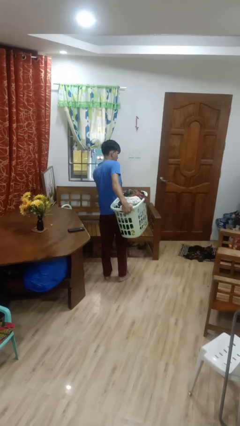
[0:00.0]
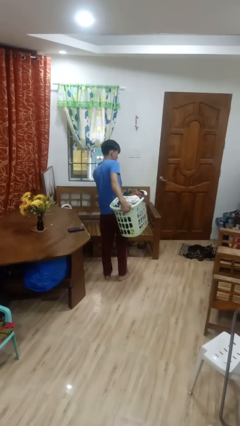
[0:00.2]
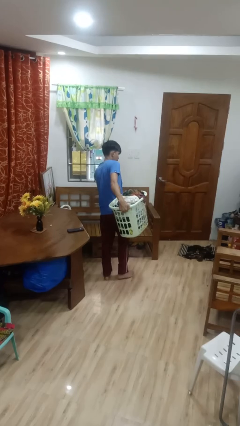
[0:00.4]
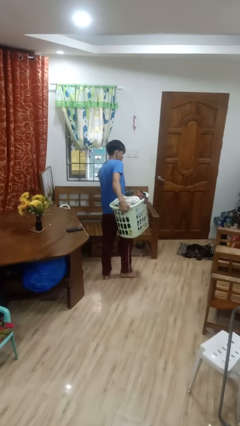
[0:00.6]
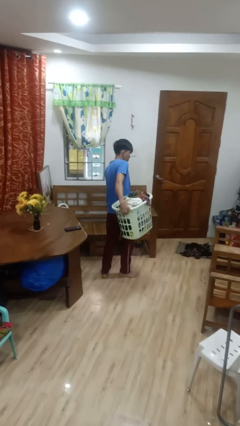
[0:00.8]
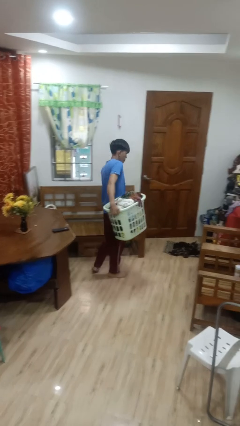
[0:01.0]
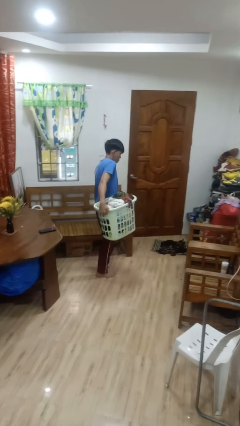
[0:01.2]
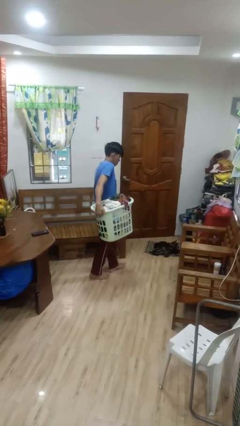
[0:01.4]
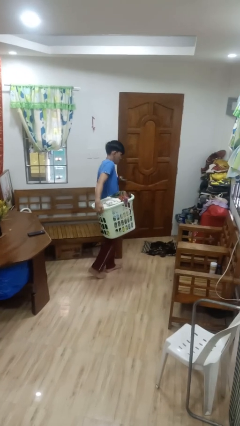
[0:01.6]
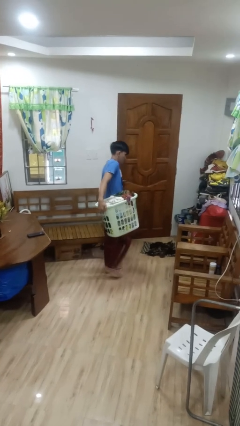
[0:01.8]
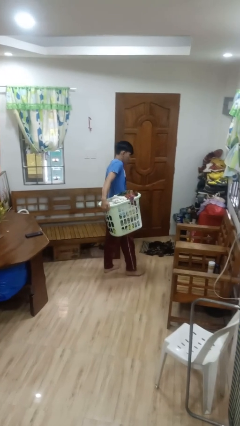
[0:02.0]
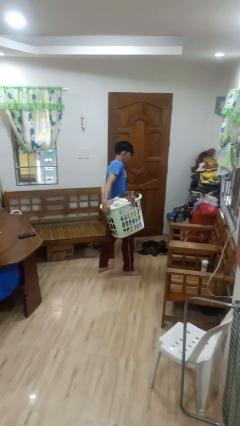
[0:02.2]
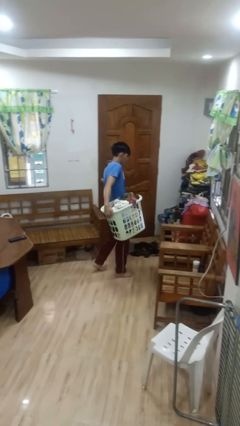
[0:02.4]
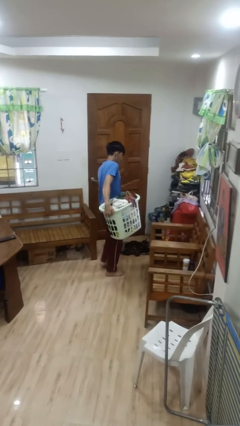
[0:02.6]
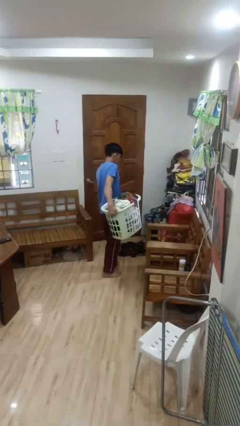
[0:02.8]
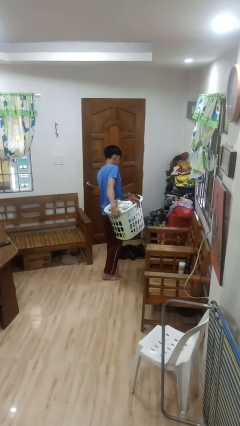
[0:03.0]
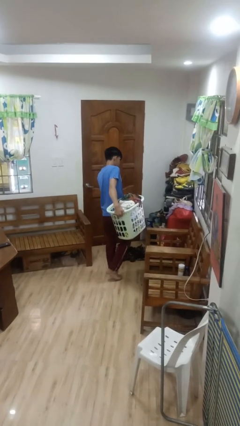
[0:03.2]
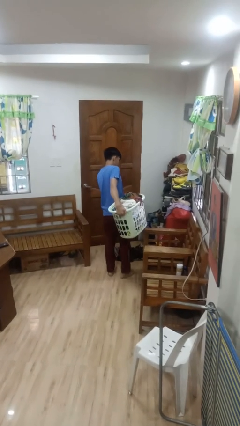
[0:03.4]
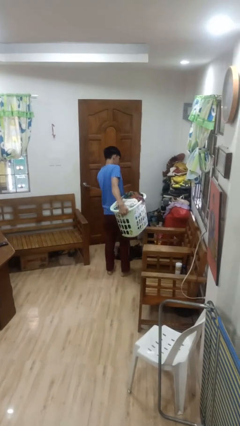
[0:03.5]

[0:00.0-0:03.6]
person carries laundry basket

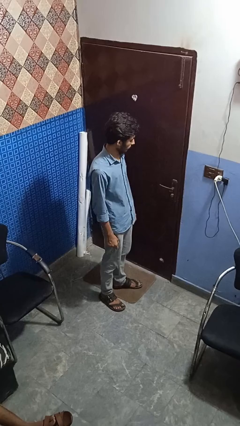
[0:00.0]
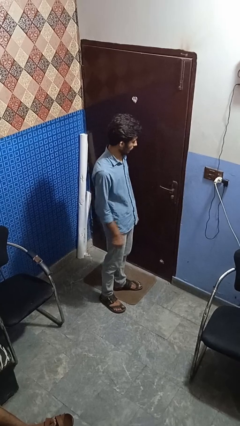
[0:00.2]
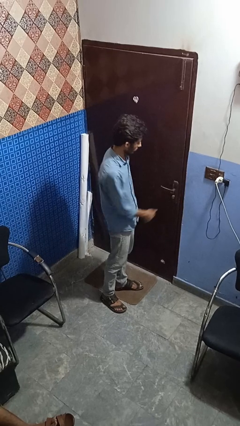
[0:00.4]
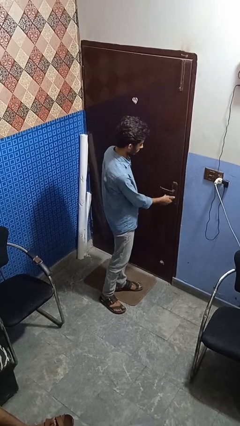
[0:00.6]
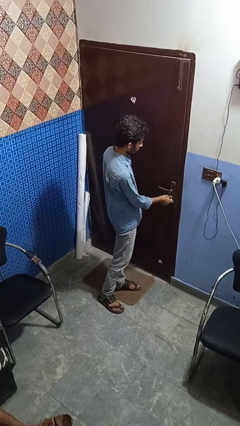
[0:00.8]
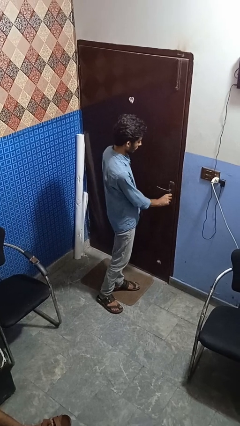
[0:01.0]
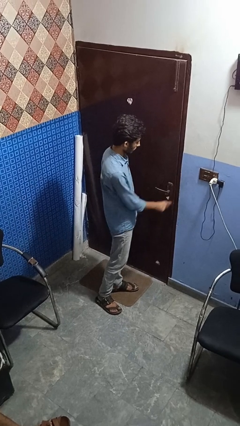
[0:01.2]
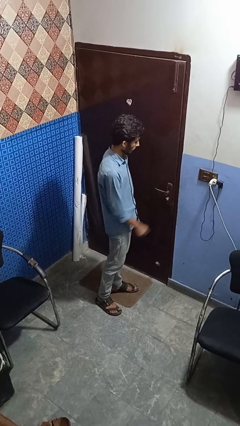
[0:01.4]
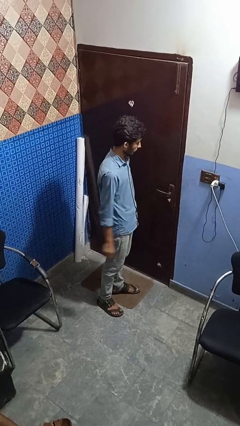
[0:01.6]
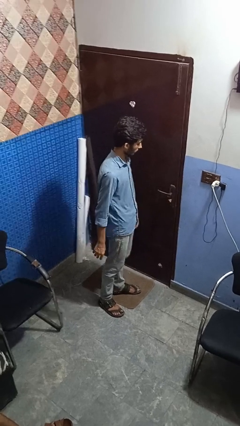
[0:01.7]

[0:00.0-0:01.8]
person unlocks door with keys

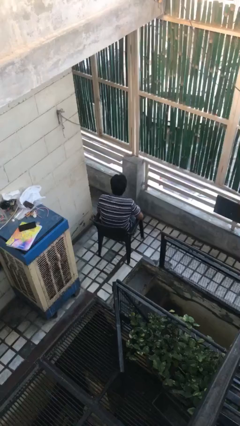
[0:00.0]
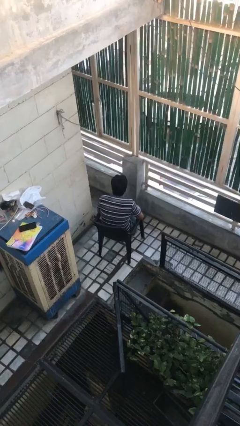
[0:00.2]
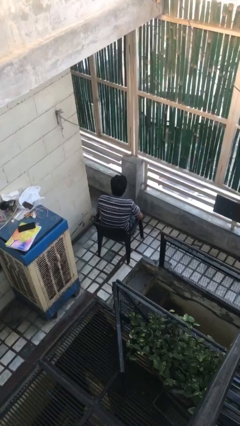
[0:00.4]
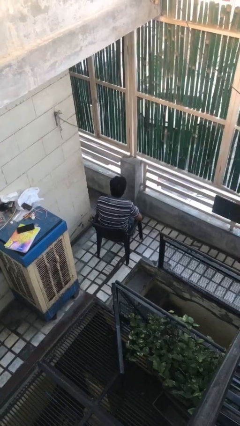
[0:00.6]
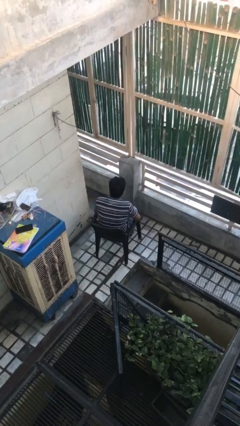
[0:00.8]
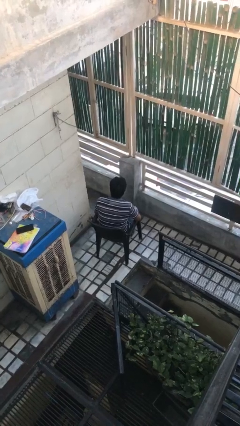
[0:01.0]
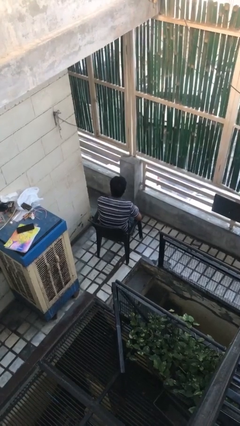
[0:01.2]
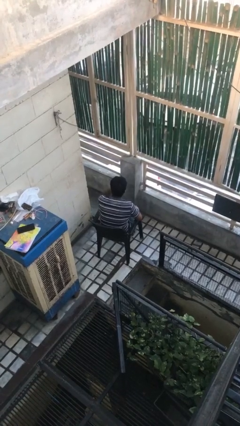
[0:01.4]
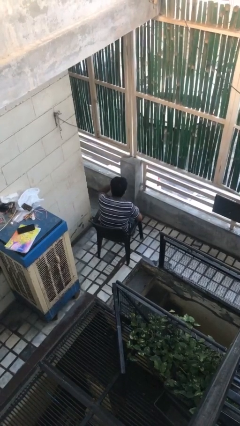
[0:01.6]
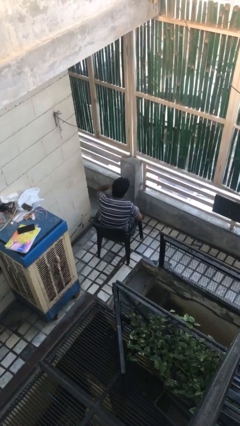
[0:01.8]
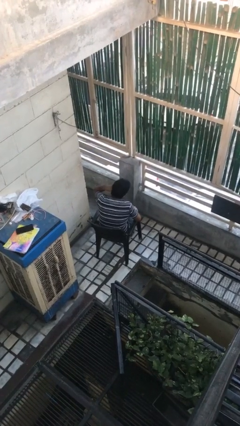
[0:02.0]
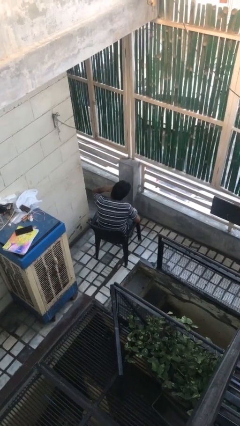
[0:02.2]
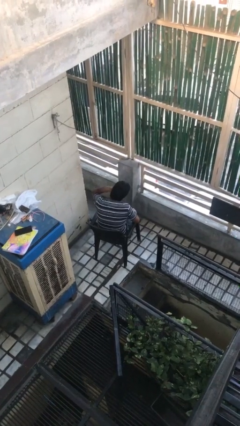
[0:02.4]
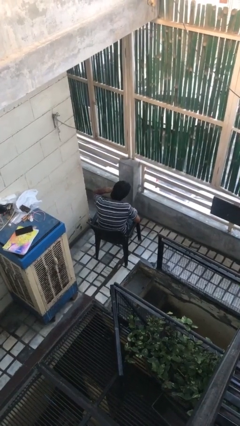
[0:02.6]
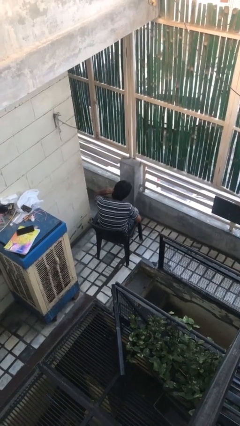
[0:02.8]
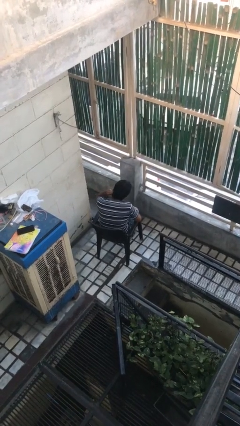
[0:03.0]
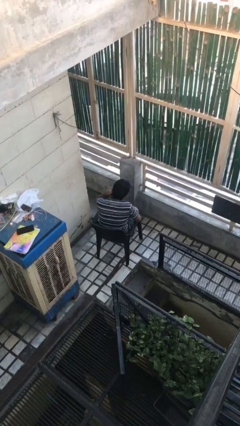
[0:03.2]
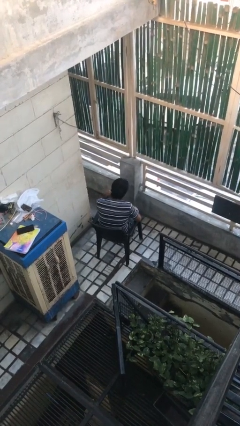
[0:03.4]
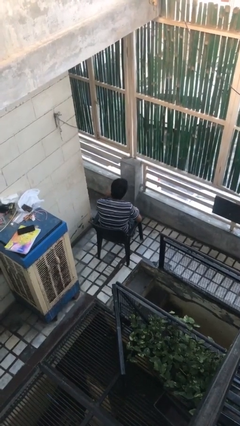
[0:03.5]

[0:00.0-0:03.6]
person strokes hair

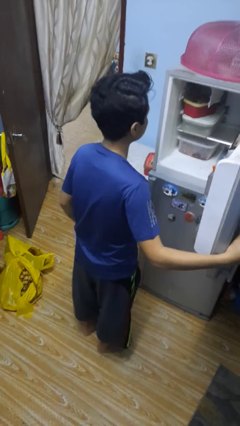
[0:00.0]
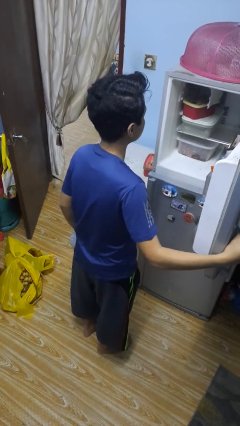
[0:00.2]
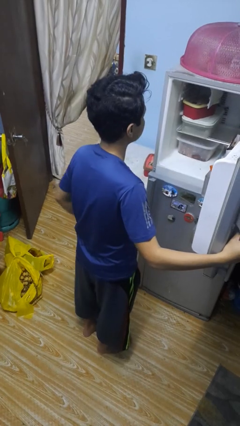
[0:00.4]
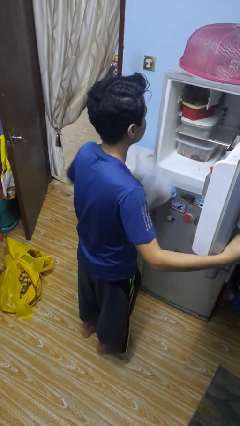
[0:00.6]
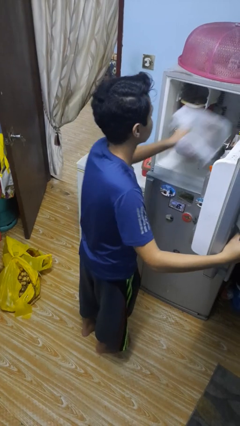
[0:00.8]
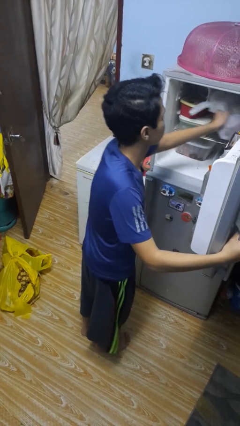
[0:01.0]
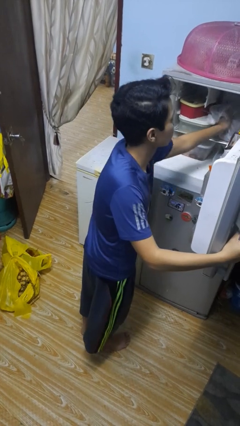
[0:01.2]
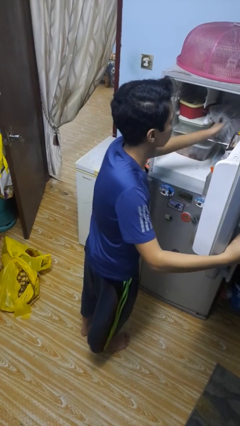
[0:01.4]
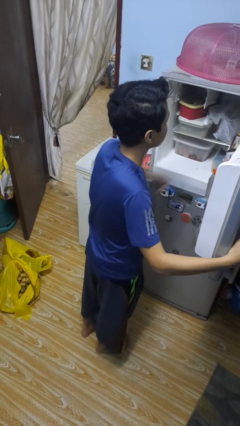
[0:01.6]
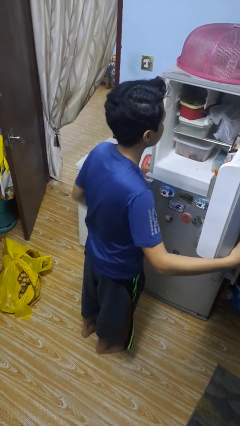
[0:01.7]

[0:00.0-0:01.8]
person loads groceries into refrigerator

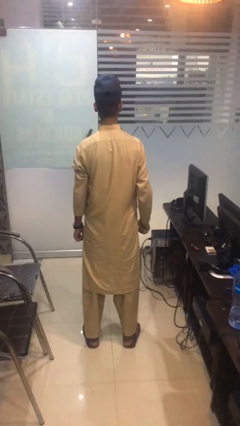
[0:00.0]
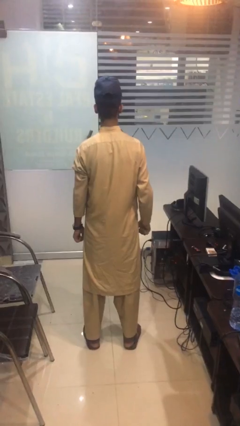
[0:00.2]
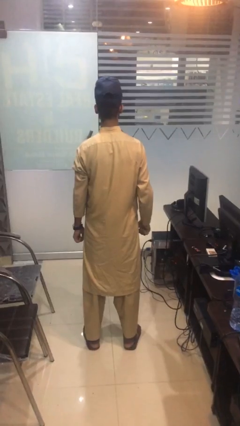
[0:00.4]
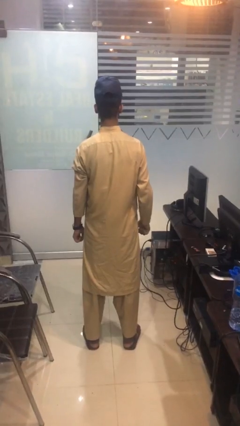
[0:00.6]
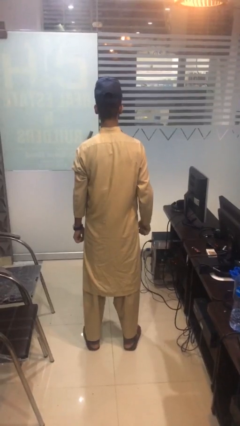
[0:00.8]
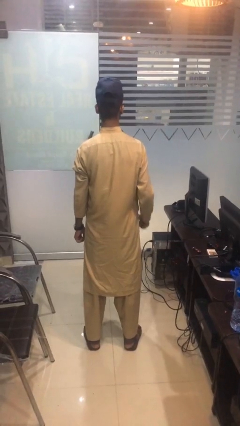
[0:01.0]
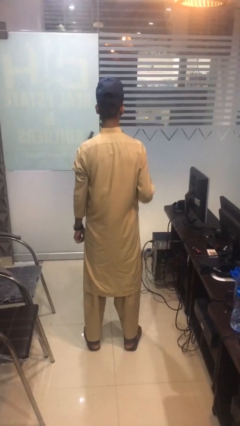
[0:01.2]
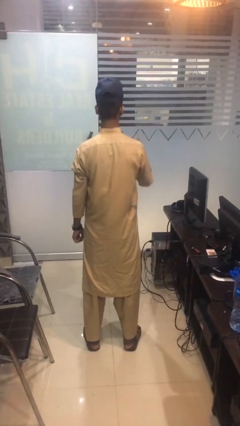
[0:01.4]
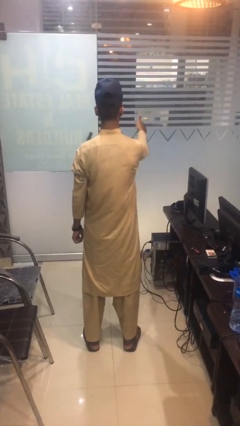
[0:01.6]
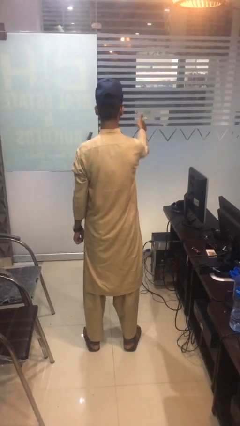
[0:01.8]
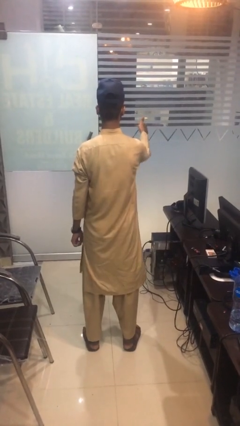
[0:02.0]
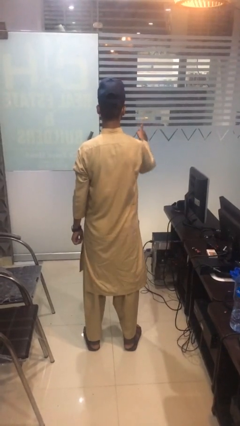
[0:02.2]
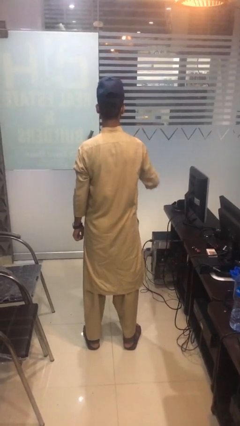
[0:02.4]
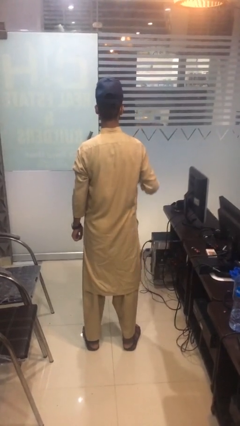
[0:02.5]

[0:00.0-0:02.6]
person gestures thumbs up

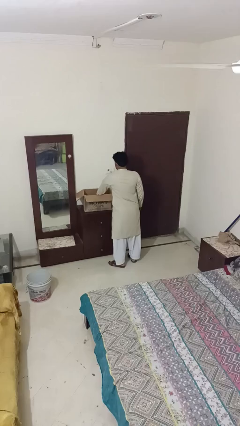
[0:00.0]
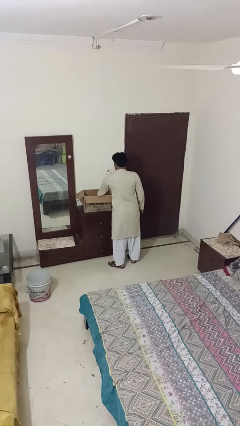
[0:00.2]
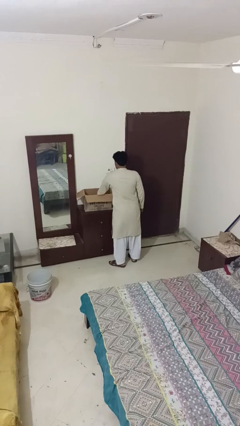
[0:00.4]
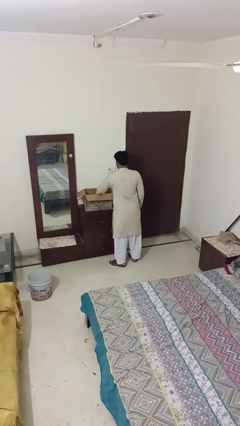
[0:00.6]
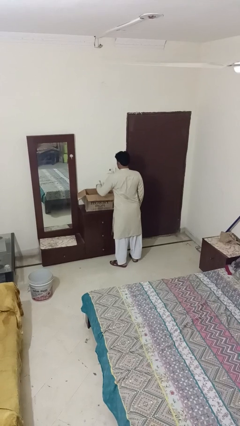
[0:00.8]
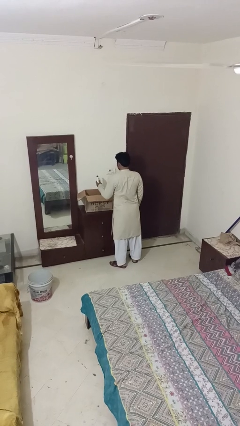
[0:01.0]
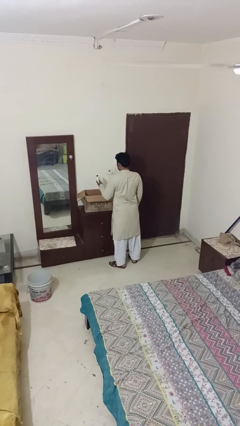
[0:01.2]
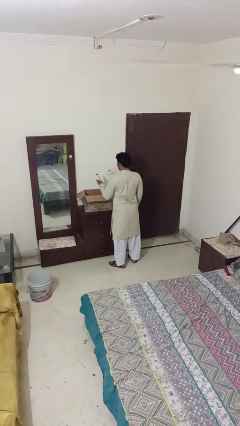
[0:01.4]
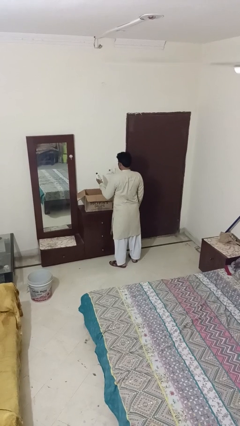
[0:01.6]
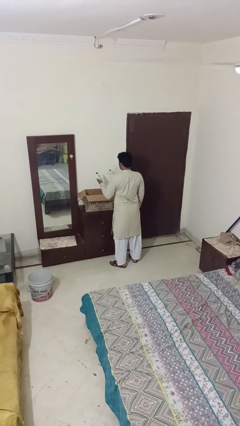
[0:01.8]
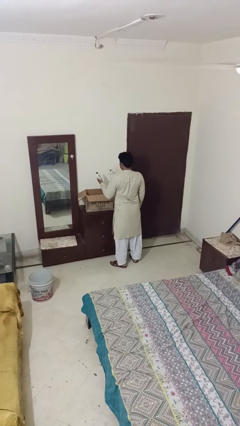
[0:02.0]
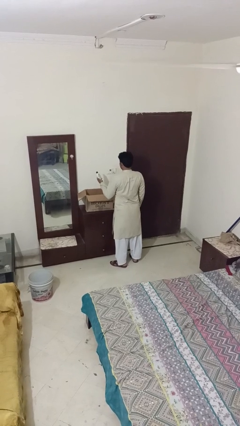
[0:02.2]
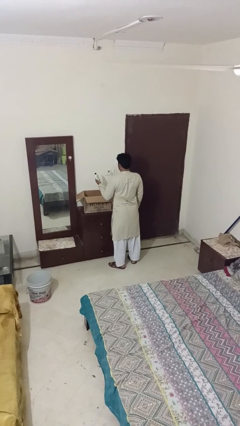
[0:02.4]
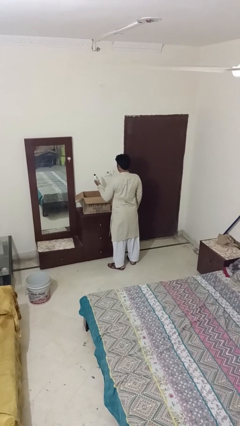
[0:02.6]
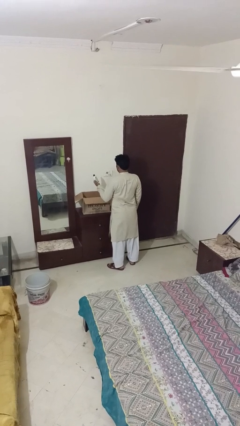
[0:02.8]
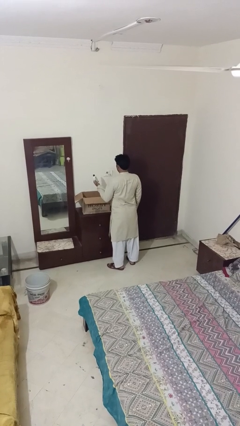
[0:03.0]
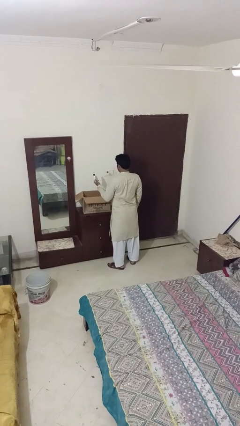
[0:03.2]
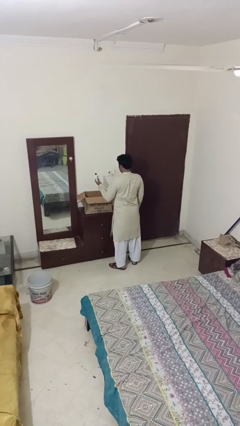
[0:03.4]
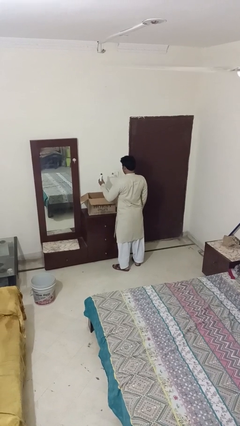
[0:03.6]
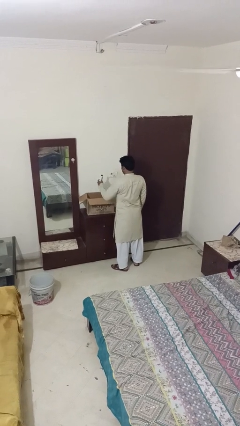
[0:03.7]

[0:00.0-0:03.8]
person takes object from box

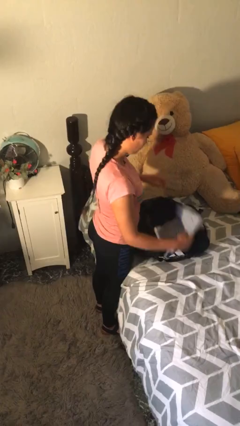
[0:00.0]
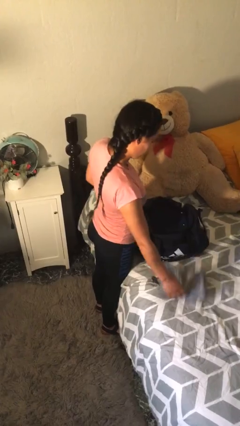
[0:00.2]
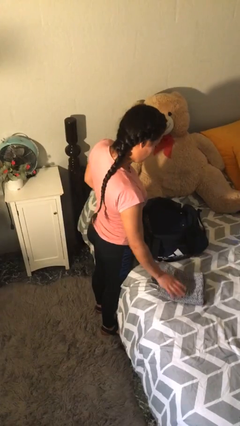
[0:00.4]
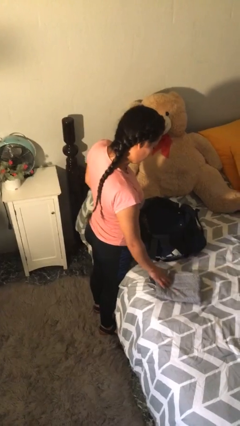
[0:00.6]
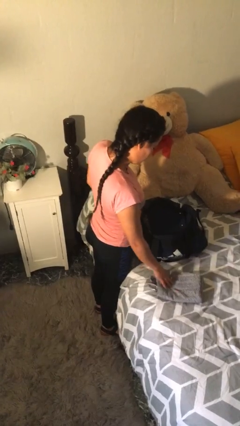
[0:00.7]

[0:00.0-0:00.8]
person unloads clothes from suitcase
